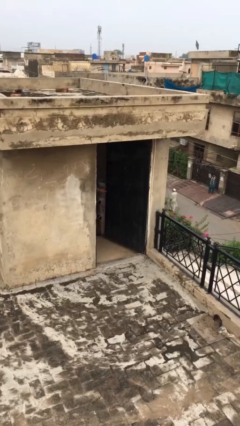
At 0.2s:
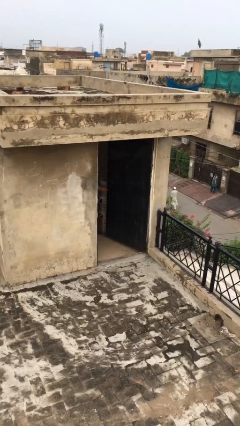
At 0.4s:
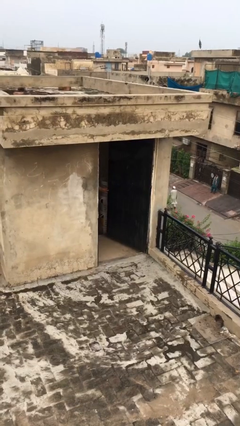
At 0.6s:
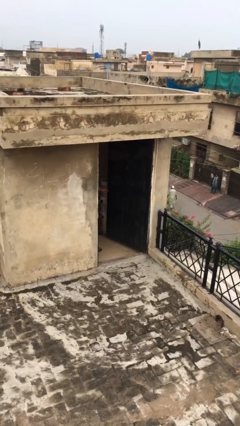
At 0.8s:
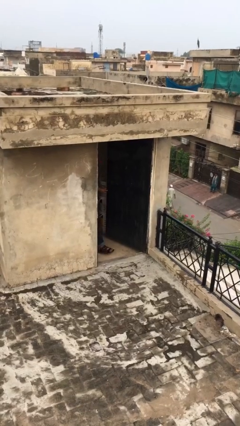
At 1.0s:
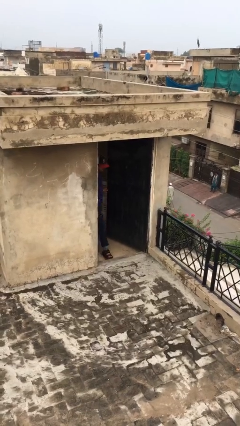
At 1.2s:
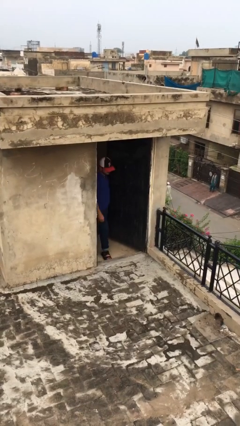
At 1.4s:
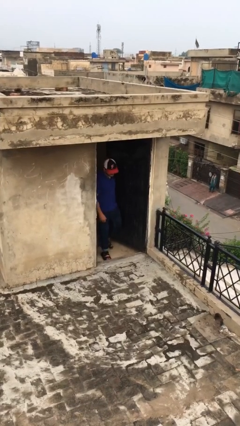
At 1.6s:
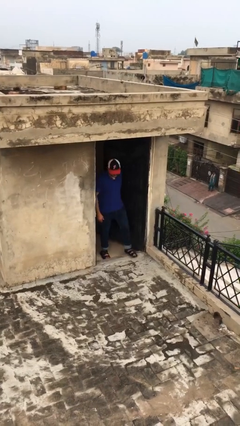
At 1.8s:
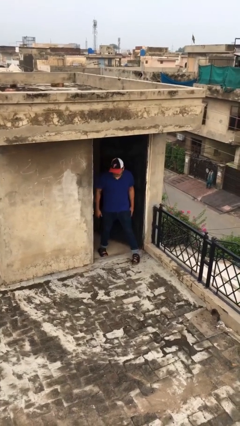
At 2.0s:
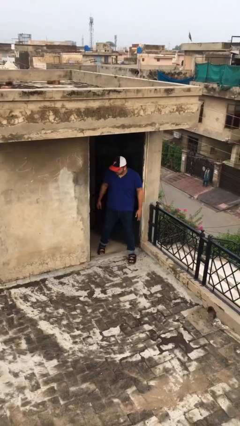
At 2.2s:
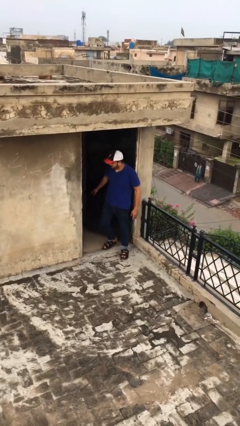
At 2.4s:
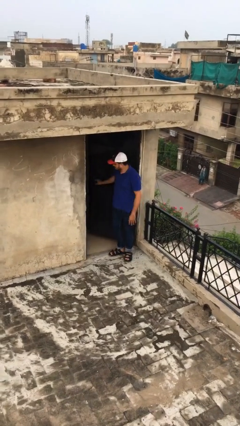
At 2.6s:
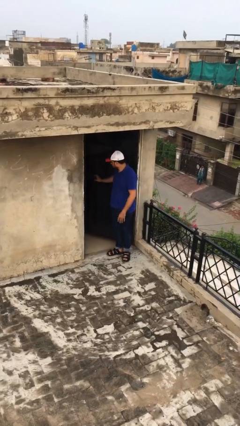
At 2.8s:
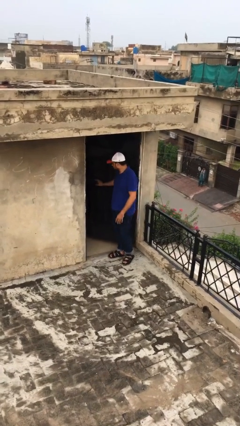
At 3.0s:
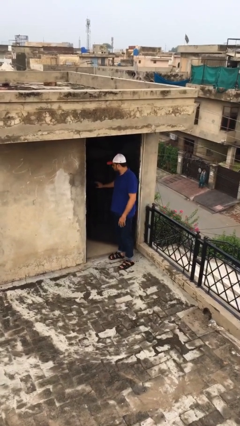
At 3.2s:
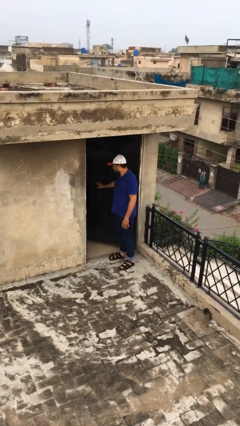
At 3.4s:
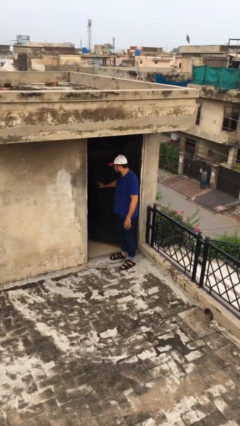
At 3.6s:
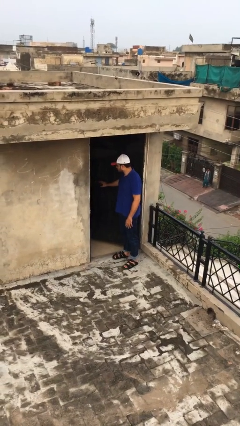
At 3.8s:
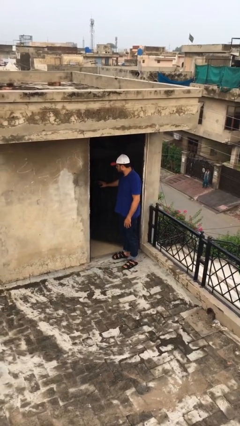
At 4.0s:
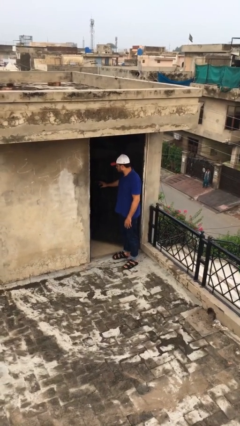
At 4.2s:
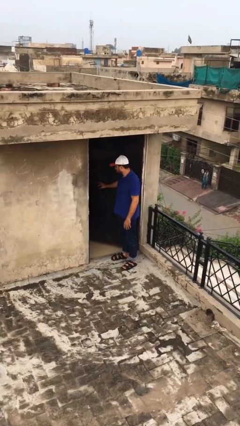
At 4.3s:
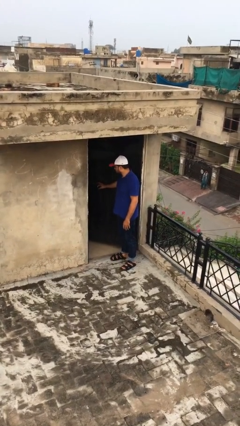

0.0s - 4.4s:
person enters scene through structure

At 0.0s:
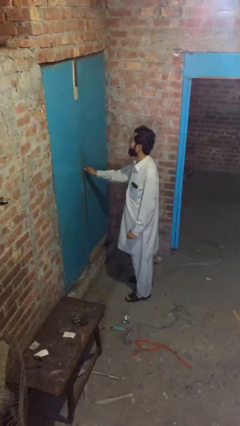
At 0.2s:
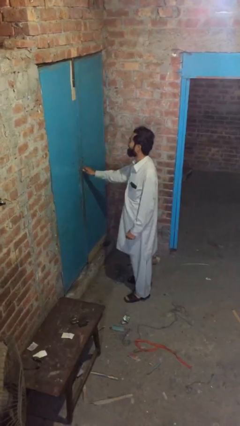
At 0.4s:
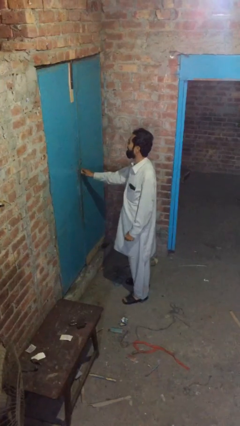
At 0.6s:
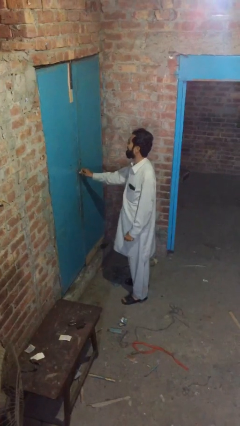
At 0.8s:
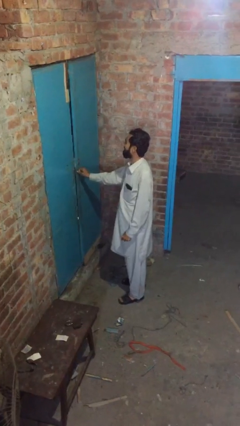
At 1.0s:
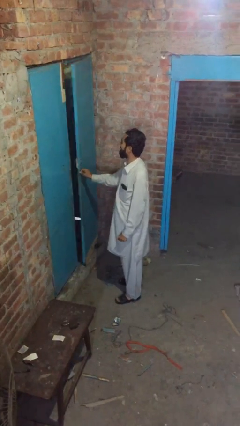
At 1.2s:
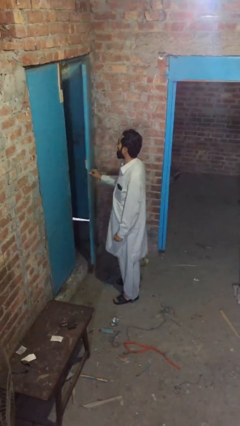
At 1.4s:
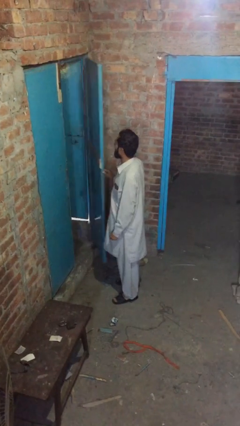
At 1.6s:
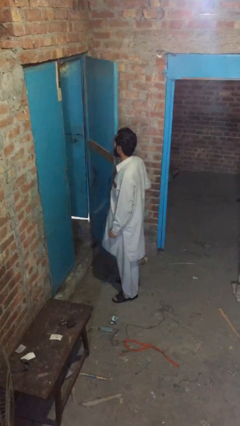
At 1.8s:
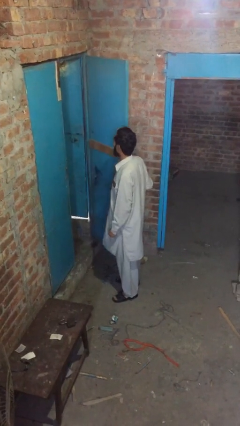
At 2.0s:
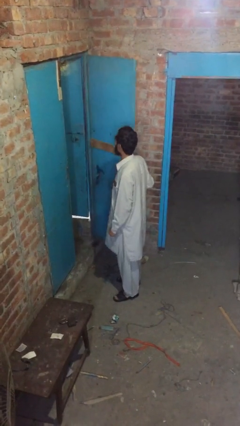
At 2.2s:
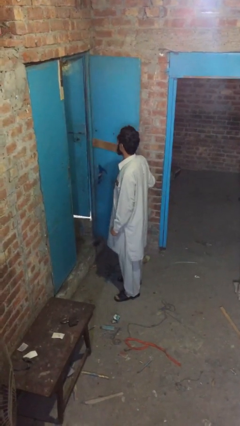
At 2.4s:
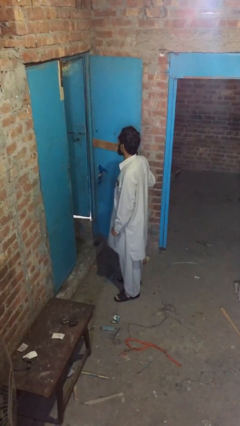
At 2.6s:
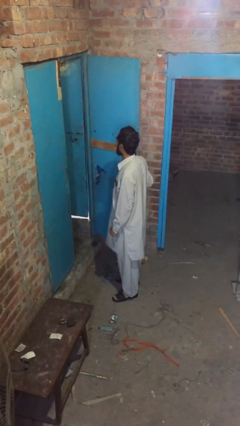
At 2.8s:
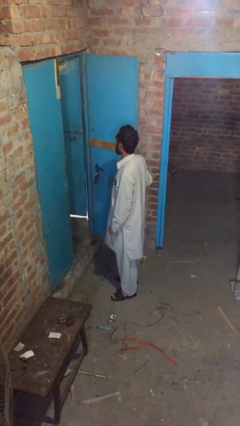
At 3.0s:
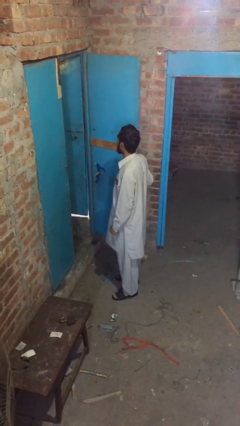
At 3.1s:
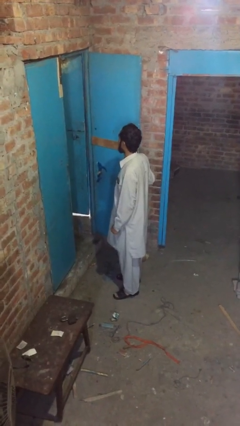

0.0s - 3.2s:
person opens facility door

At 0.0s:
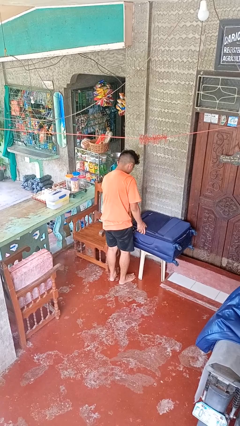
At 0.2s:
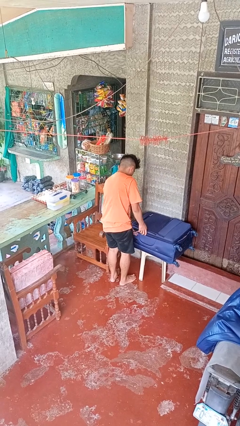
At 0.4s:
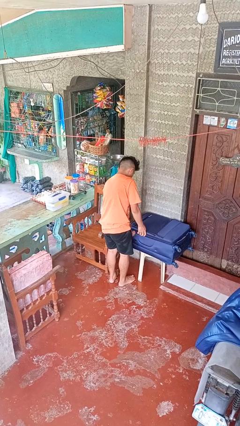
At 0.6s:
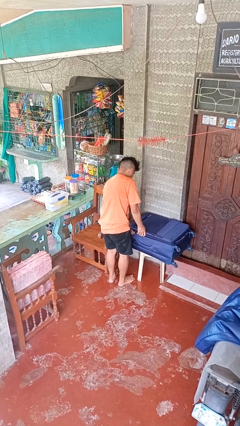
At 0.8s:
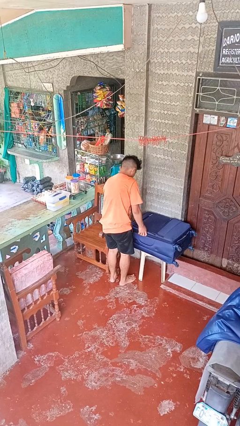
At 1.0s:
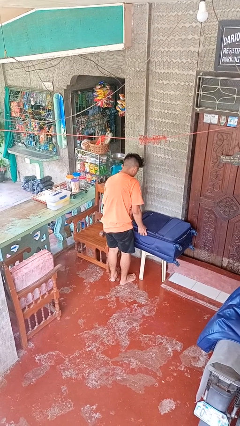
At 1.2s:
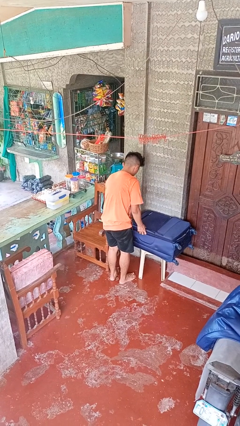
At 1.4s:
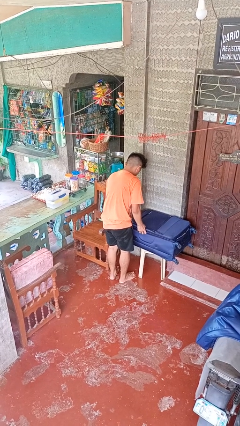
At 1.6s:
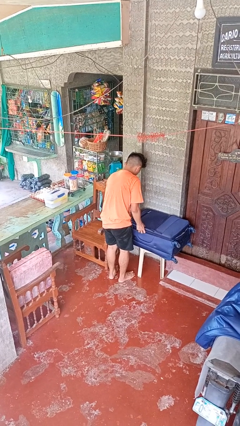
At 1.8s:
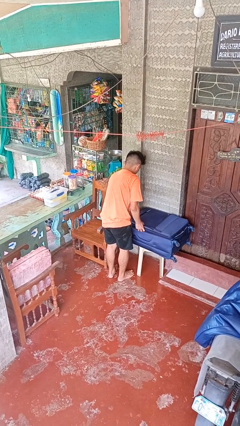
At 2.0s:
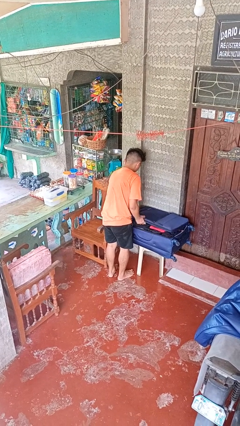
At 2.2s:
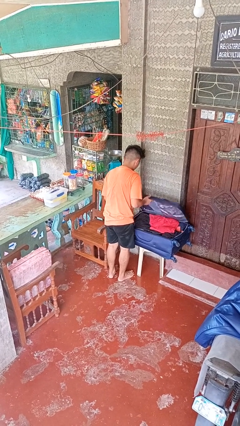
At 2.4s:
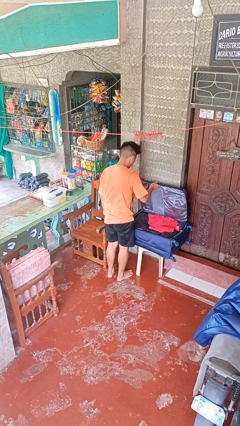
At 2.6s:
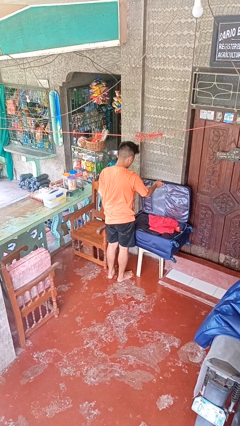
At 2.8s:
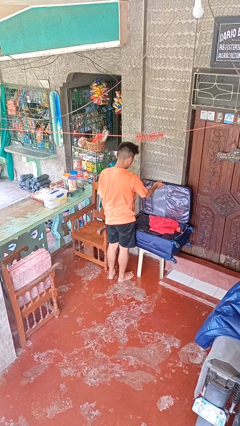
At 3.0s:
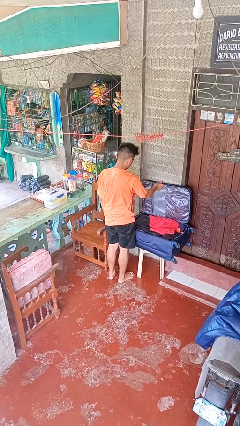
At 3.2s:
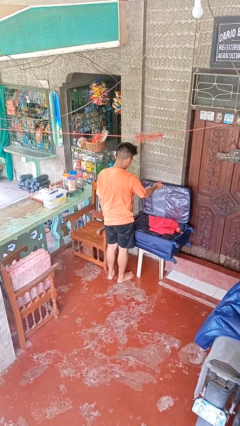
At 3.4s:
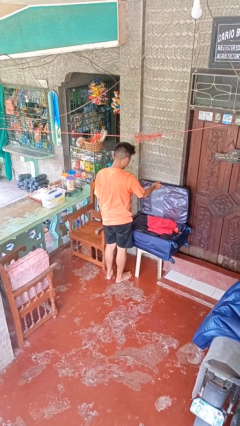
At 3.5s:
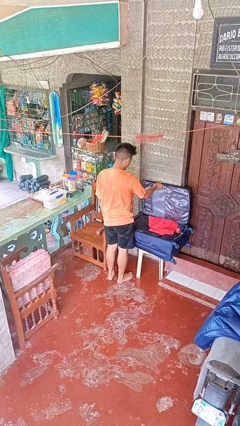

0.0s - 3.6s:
person opens suitcase

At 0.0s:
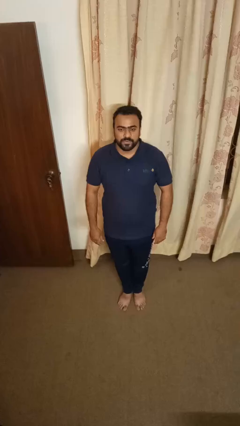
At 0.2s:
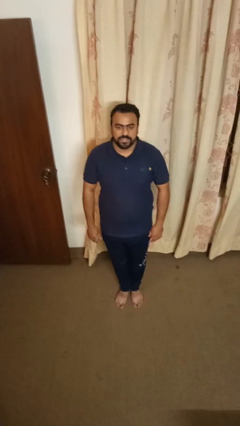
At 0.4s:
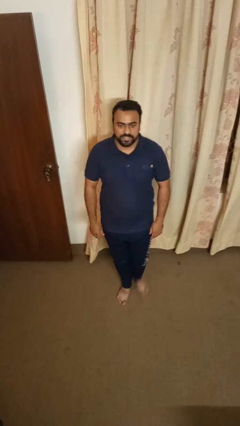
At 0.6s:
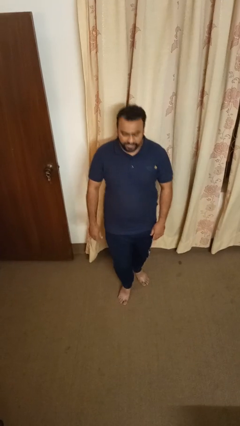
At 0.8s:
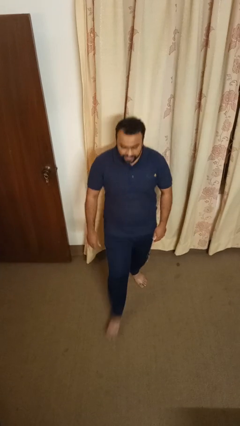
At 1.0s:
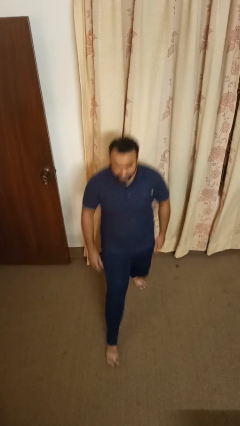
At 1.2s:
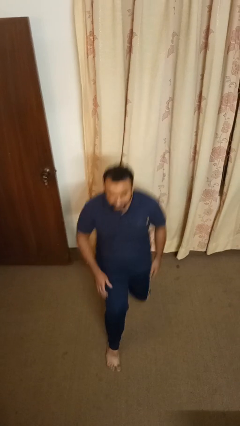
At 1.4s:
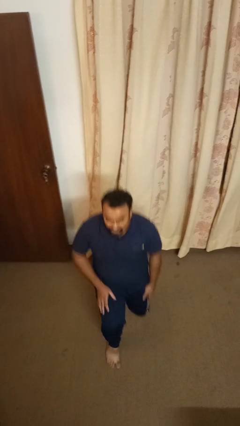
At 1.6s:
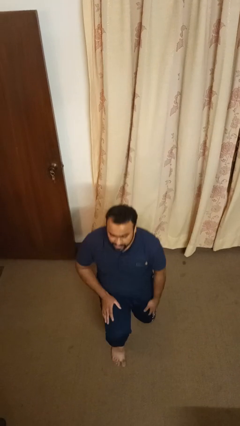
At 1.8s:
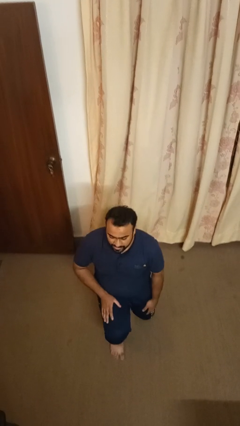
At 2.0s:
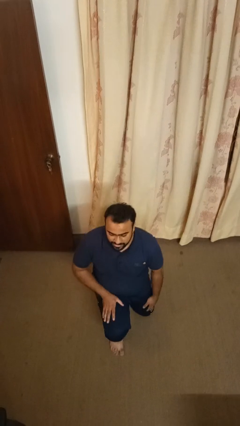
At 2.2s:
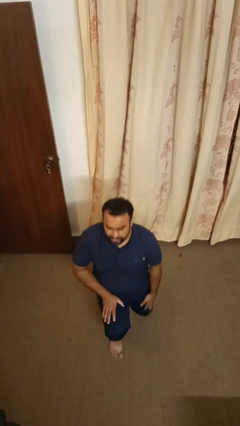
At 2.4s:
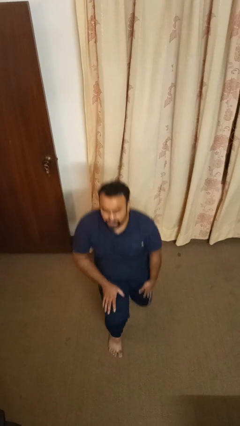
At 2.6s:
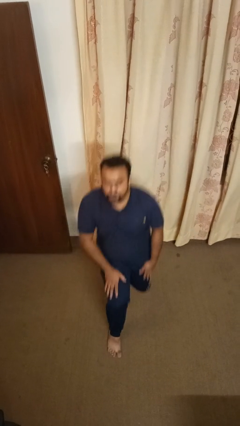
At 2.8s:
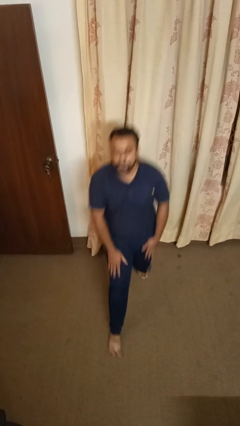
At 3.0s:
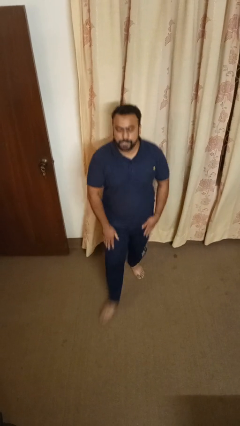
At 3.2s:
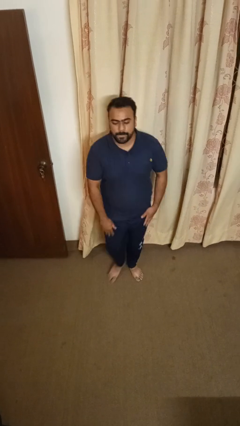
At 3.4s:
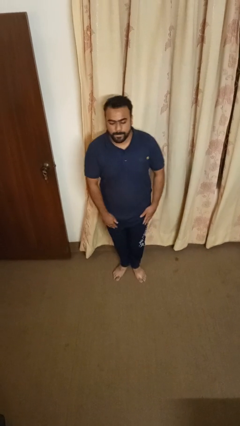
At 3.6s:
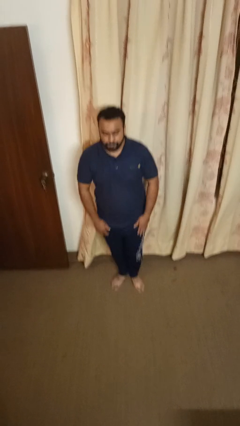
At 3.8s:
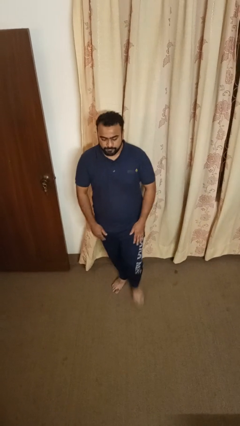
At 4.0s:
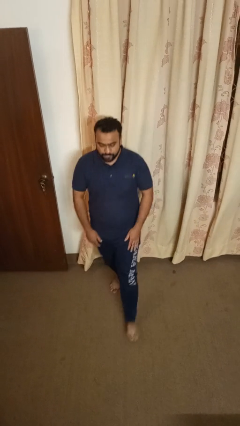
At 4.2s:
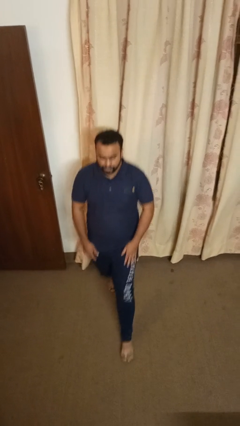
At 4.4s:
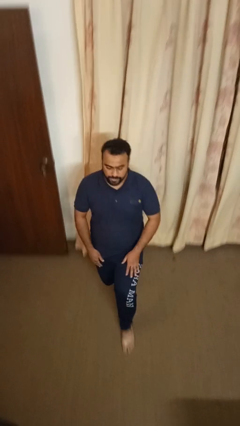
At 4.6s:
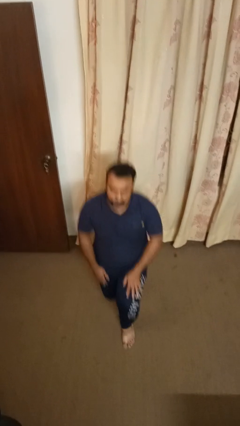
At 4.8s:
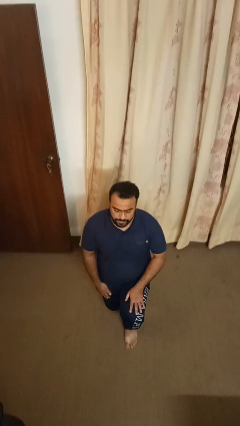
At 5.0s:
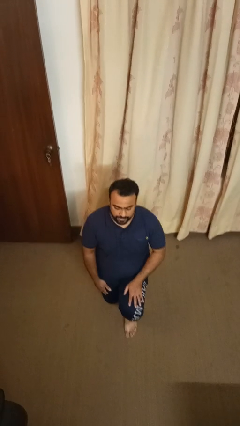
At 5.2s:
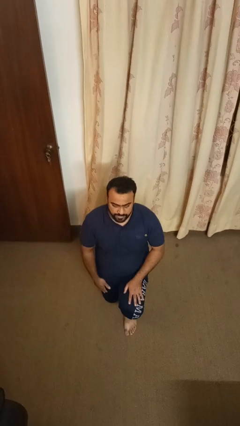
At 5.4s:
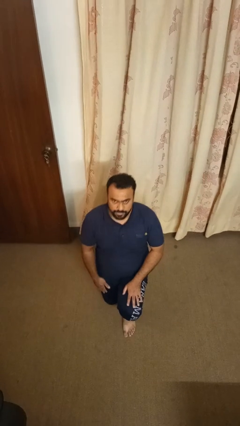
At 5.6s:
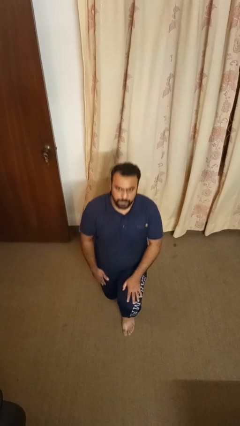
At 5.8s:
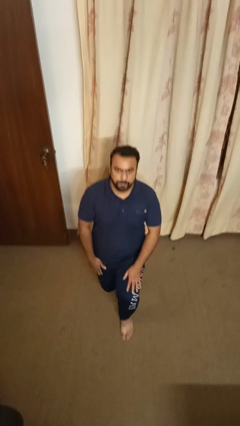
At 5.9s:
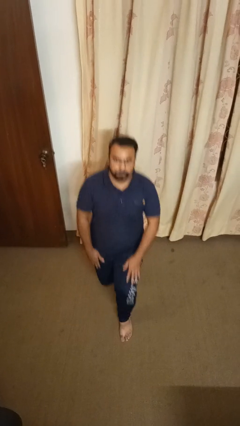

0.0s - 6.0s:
person exercises with lunges

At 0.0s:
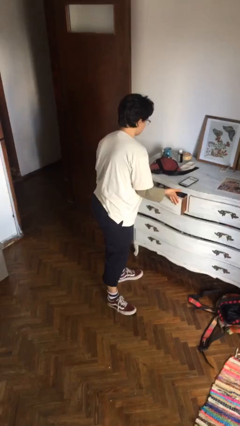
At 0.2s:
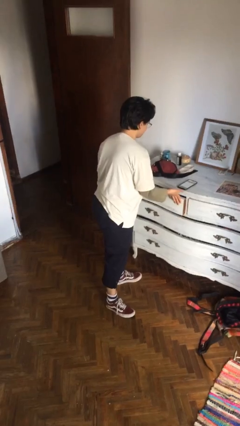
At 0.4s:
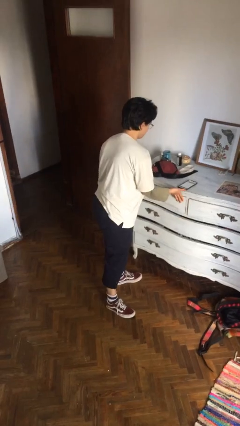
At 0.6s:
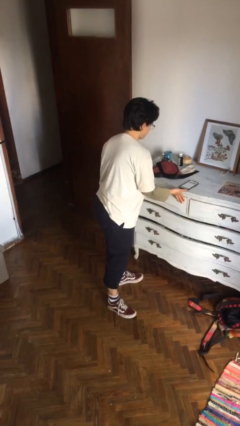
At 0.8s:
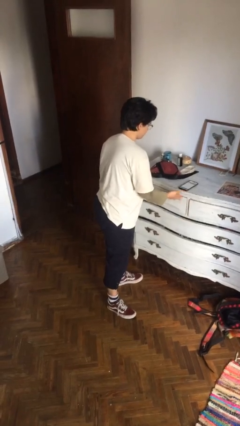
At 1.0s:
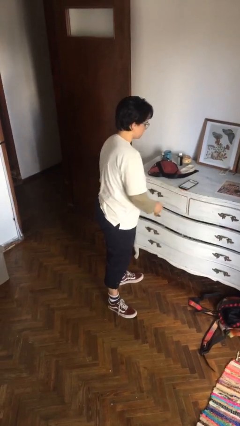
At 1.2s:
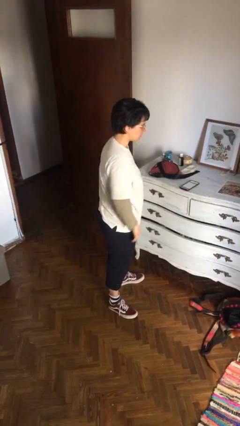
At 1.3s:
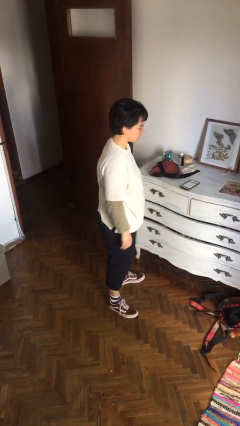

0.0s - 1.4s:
person closes dresser drawer
